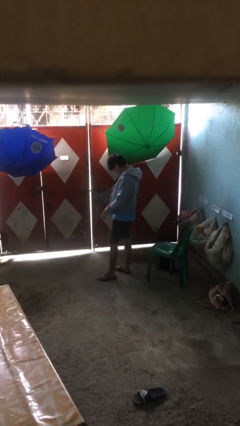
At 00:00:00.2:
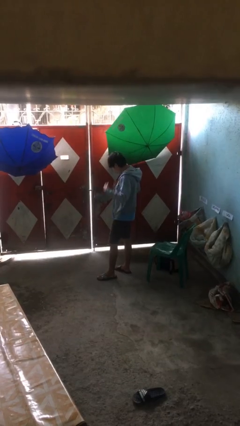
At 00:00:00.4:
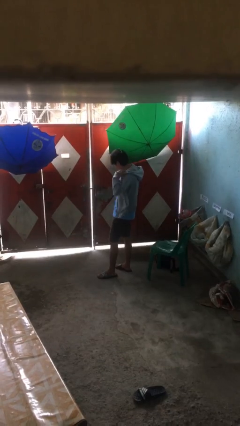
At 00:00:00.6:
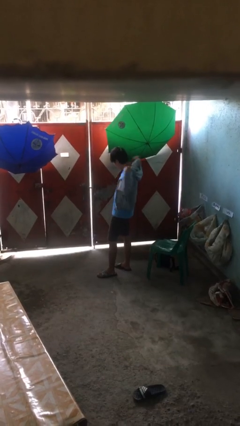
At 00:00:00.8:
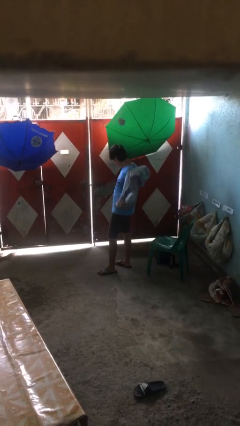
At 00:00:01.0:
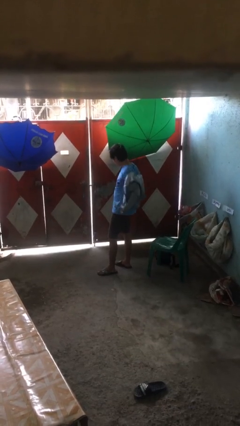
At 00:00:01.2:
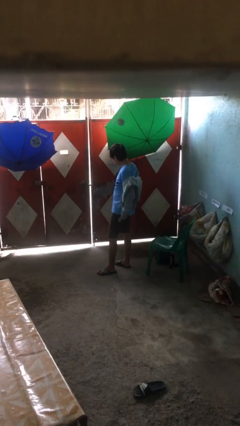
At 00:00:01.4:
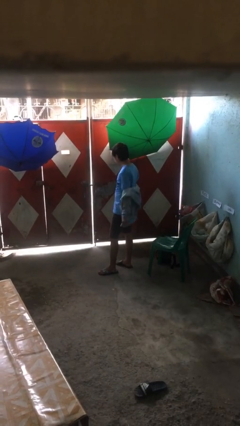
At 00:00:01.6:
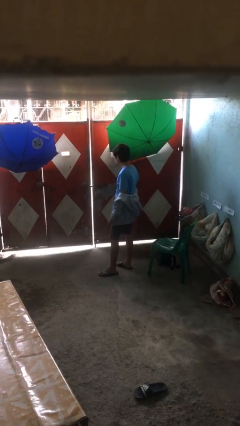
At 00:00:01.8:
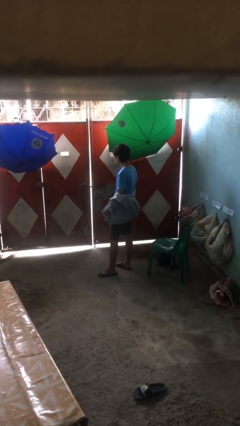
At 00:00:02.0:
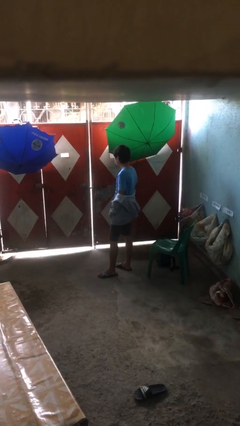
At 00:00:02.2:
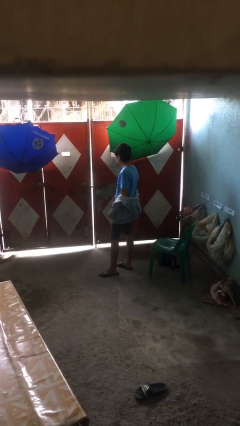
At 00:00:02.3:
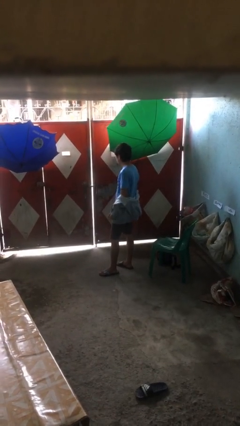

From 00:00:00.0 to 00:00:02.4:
person takes off jacket

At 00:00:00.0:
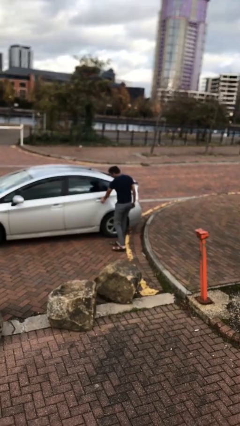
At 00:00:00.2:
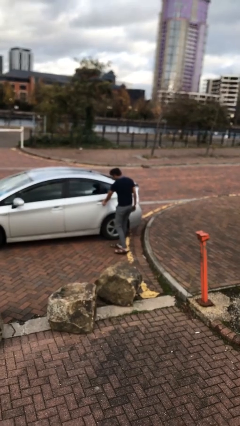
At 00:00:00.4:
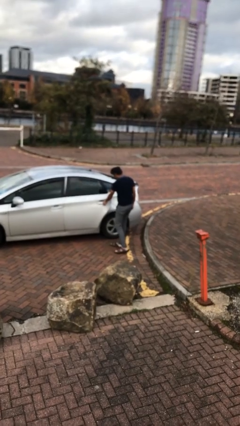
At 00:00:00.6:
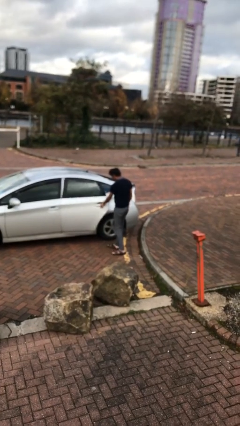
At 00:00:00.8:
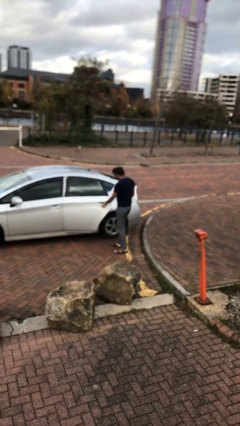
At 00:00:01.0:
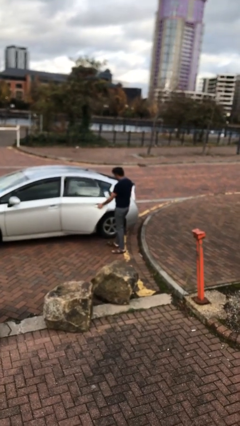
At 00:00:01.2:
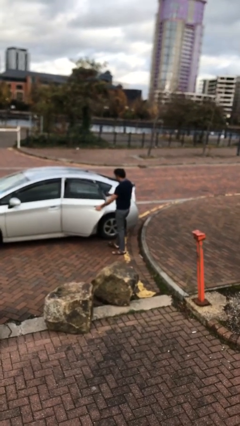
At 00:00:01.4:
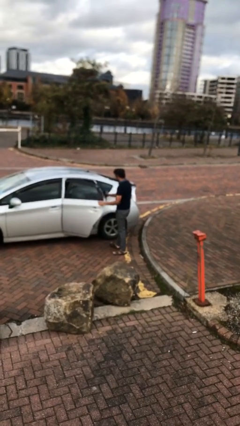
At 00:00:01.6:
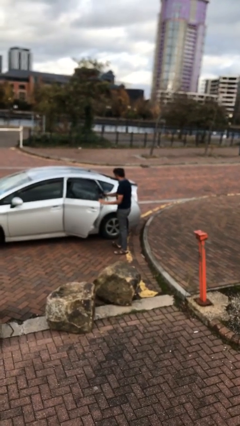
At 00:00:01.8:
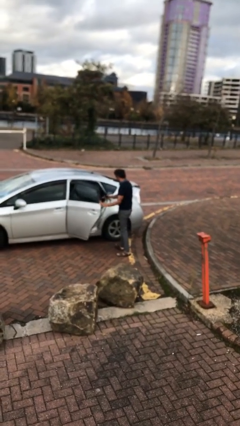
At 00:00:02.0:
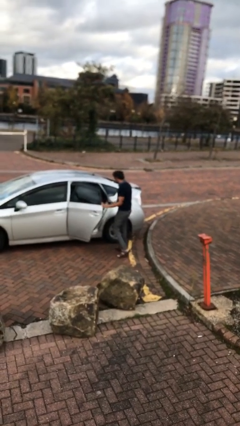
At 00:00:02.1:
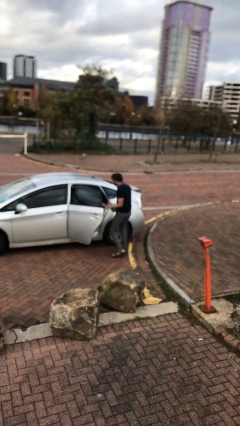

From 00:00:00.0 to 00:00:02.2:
person opens car door

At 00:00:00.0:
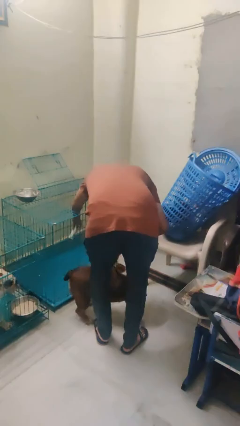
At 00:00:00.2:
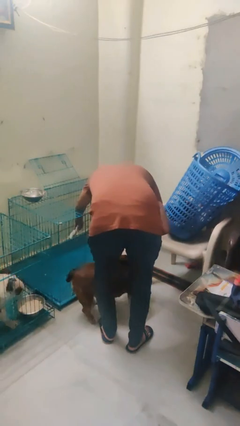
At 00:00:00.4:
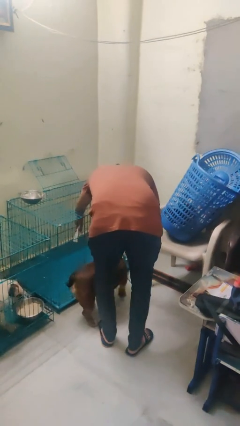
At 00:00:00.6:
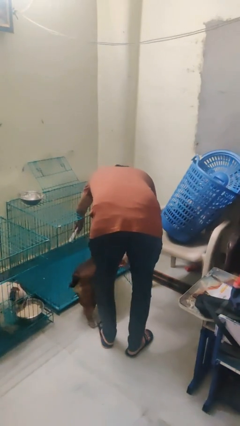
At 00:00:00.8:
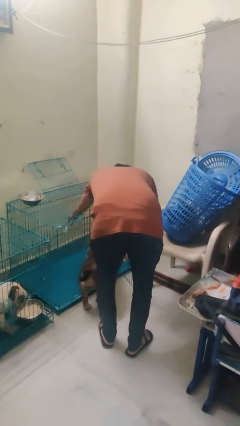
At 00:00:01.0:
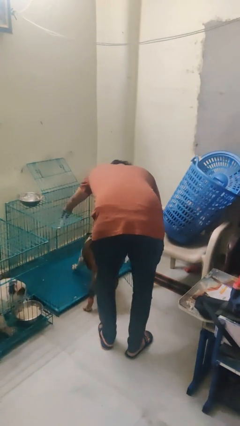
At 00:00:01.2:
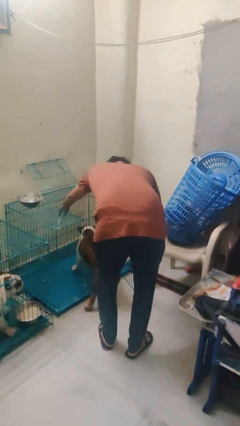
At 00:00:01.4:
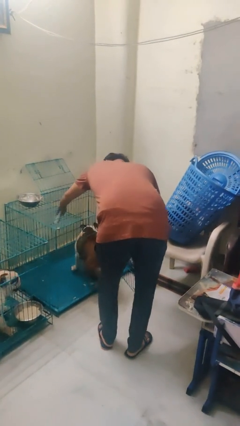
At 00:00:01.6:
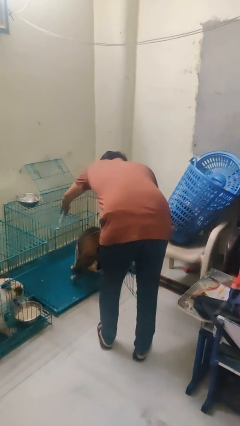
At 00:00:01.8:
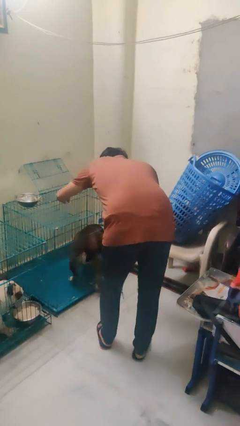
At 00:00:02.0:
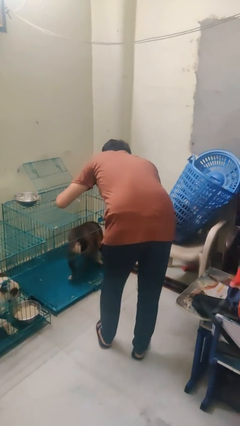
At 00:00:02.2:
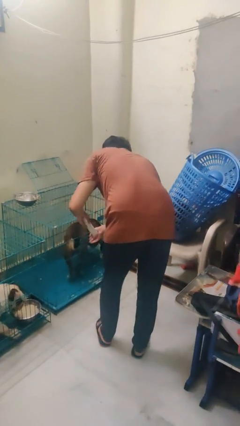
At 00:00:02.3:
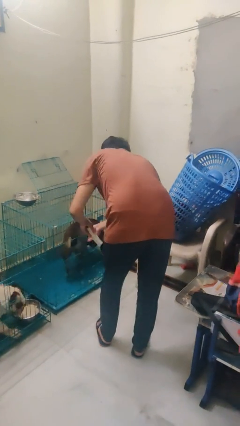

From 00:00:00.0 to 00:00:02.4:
person crates dog

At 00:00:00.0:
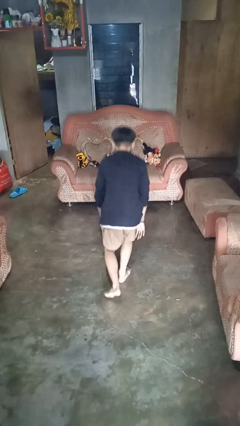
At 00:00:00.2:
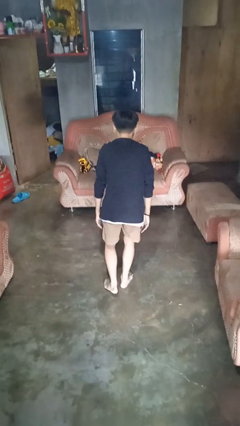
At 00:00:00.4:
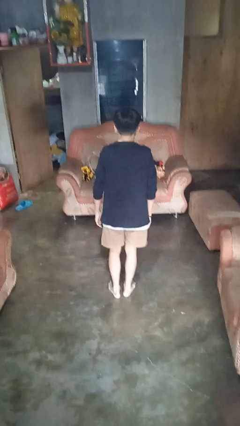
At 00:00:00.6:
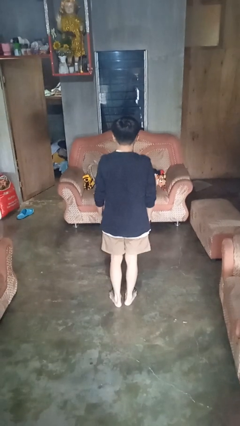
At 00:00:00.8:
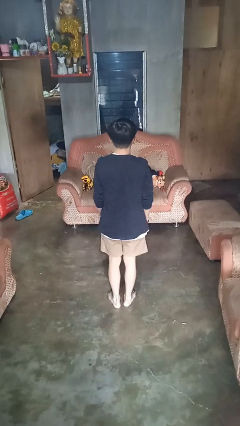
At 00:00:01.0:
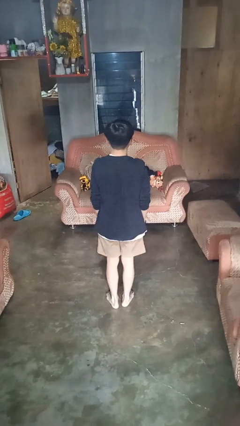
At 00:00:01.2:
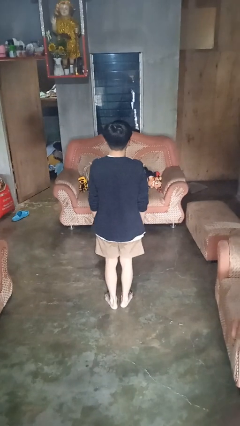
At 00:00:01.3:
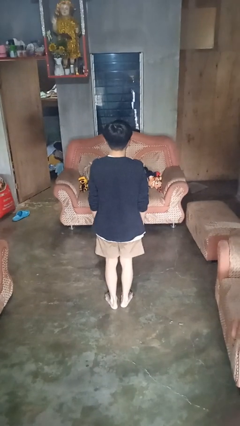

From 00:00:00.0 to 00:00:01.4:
person stands up from floor

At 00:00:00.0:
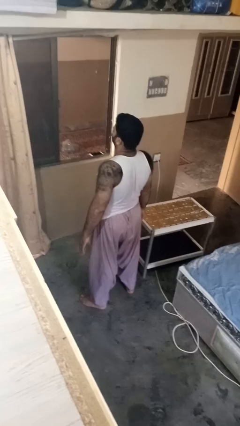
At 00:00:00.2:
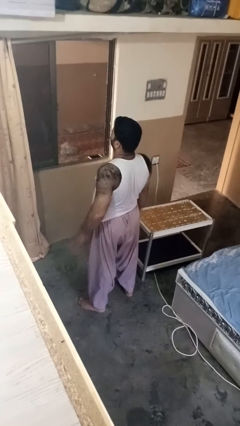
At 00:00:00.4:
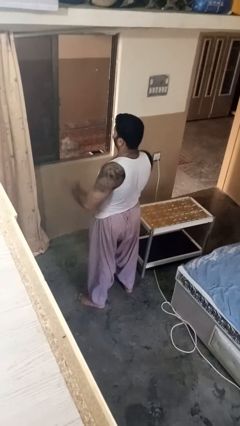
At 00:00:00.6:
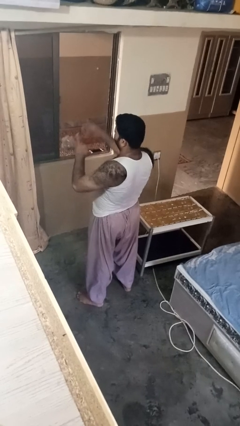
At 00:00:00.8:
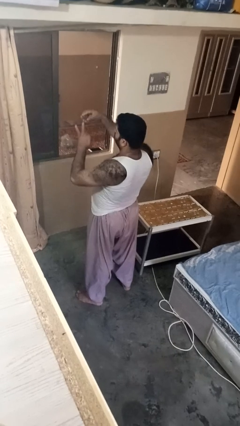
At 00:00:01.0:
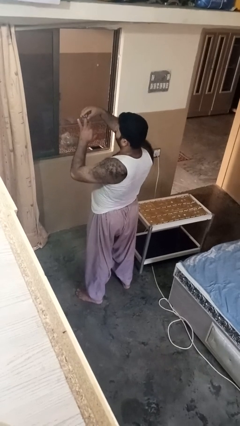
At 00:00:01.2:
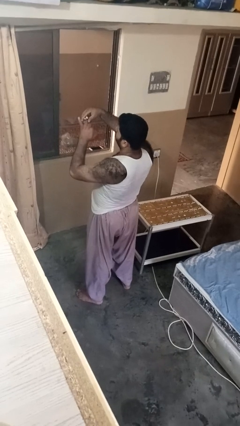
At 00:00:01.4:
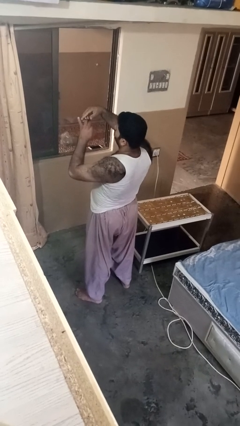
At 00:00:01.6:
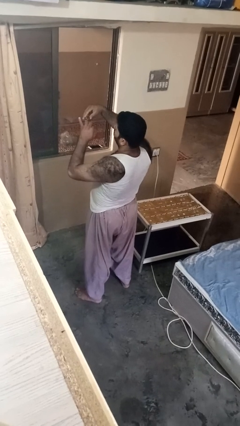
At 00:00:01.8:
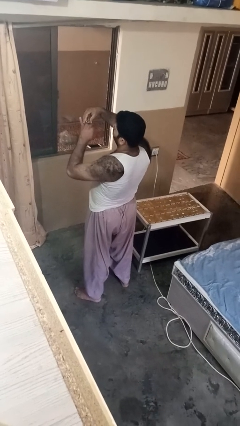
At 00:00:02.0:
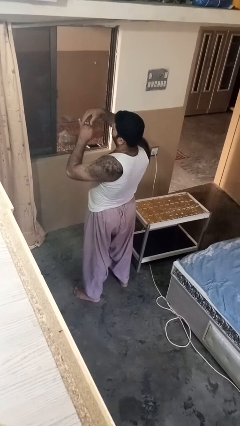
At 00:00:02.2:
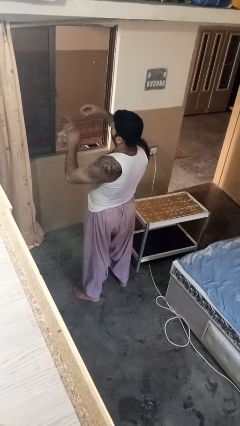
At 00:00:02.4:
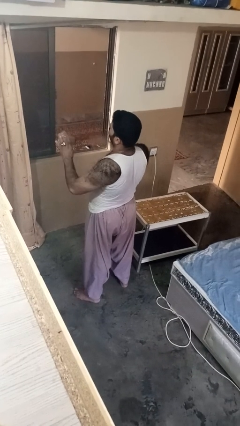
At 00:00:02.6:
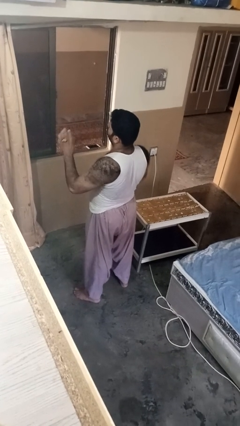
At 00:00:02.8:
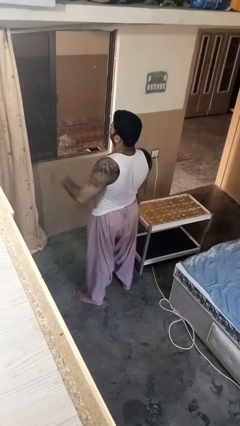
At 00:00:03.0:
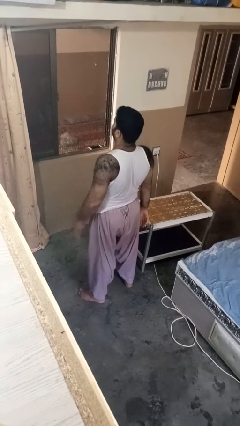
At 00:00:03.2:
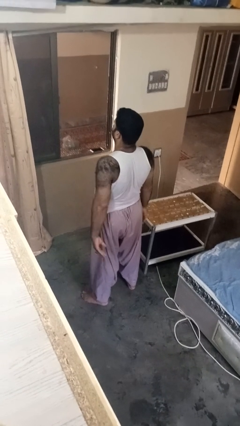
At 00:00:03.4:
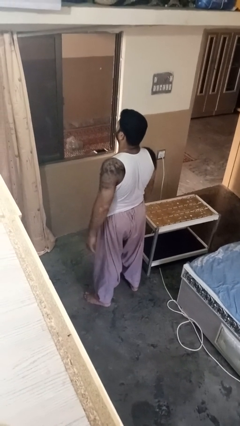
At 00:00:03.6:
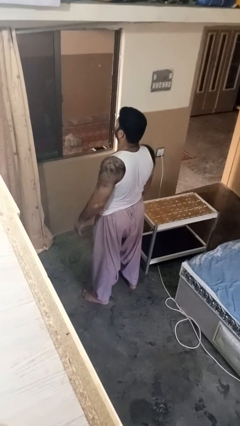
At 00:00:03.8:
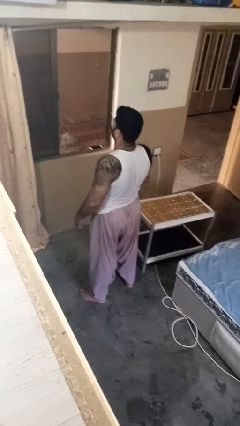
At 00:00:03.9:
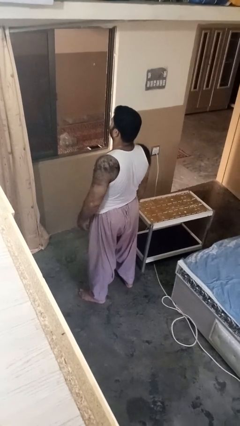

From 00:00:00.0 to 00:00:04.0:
person puts on ring

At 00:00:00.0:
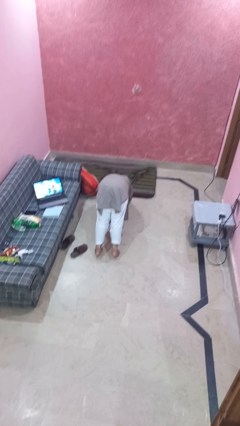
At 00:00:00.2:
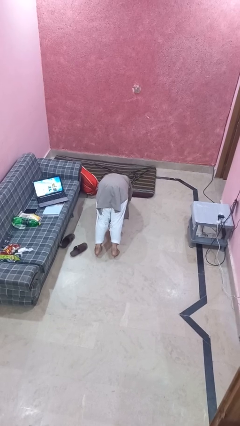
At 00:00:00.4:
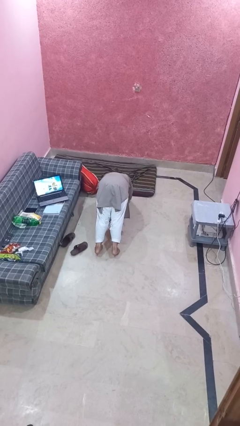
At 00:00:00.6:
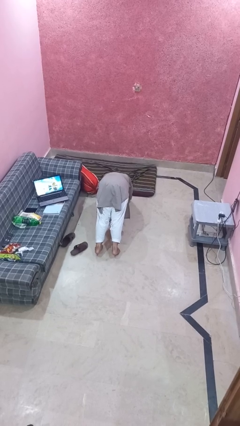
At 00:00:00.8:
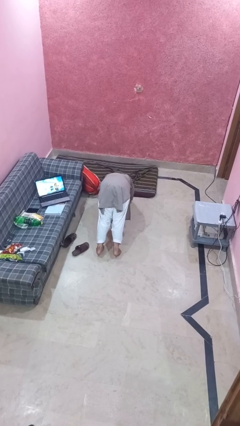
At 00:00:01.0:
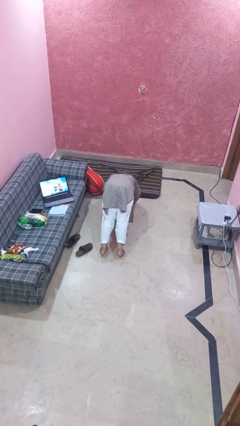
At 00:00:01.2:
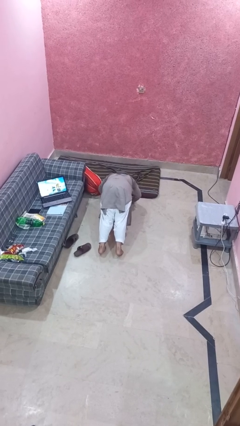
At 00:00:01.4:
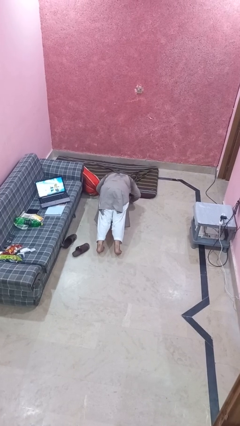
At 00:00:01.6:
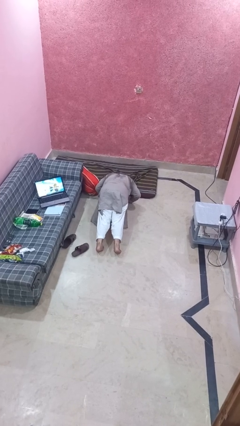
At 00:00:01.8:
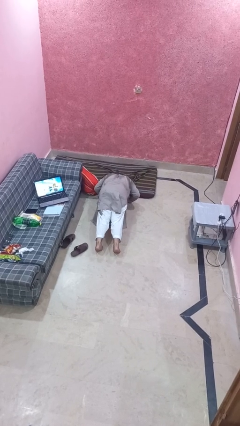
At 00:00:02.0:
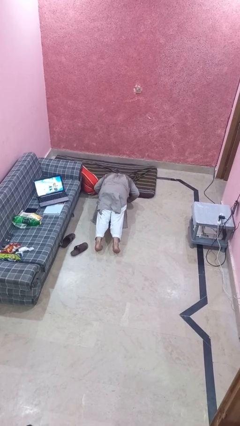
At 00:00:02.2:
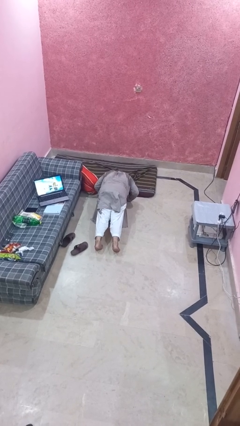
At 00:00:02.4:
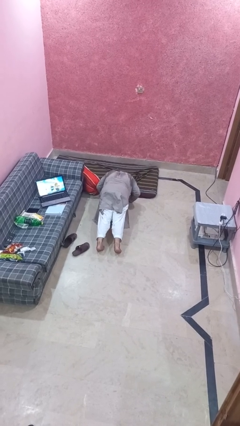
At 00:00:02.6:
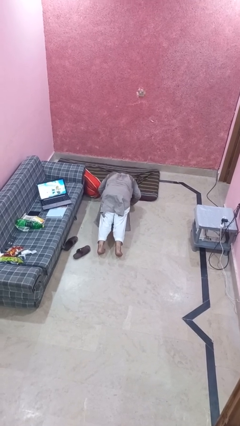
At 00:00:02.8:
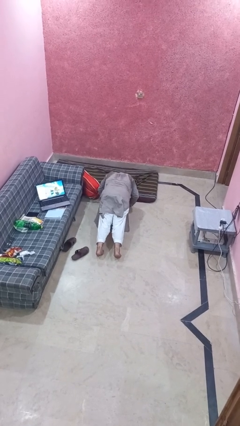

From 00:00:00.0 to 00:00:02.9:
person exercises with pushup

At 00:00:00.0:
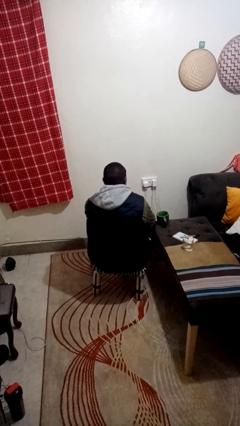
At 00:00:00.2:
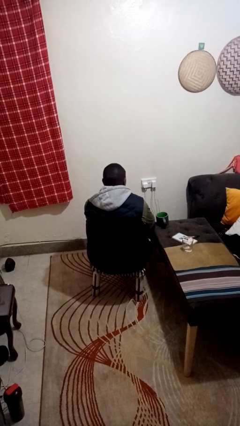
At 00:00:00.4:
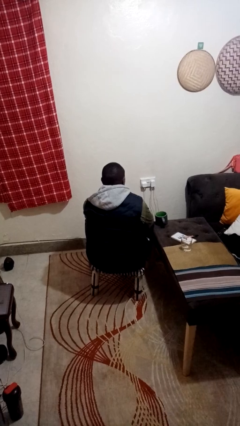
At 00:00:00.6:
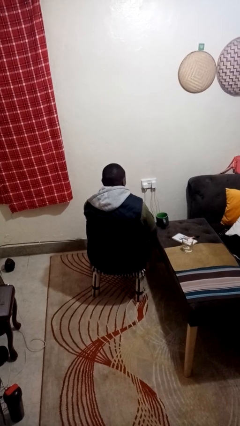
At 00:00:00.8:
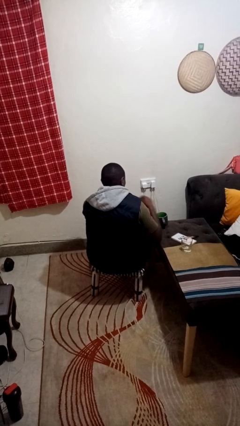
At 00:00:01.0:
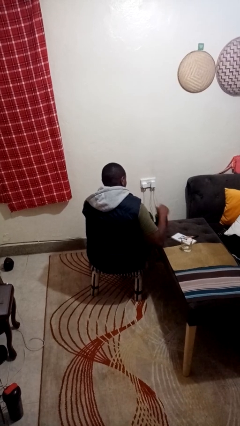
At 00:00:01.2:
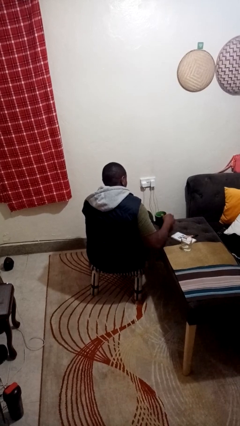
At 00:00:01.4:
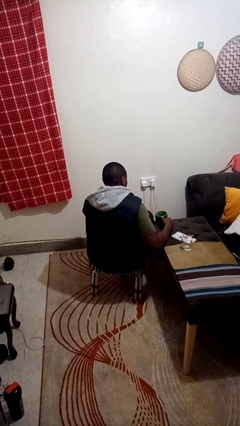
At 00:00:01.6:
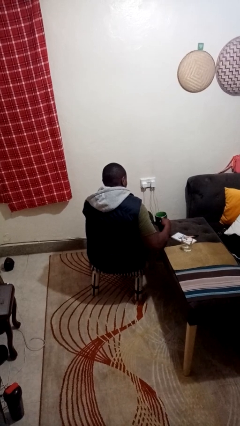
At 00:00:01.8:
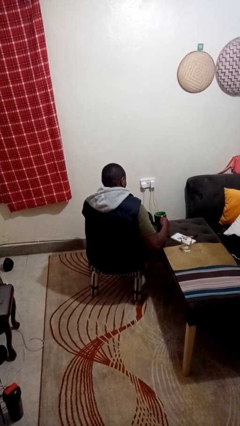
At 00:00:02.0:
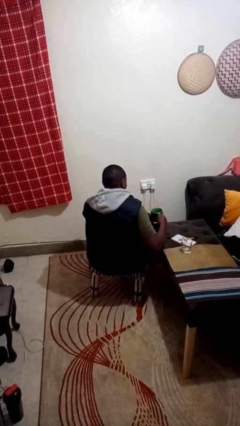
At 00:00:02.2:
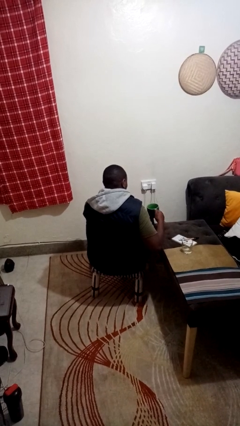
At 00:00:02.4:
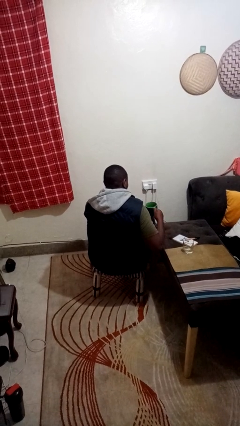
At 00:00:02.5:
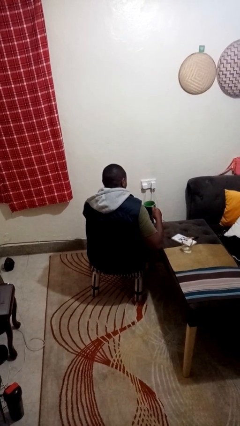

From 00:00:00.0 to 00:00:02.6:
person picks up object from table
